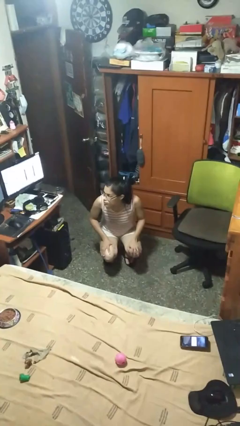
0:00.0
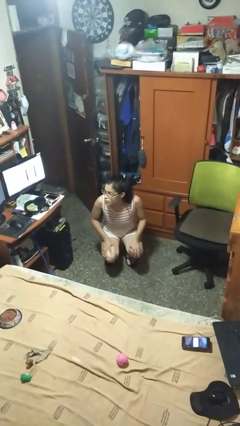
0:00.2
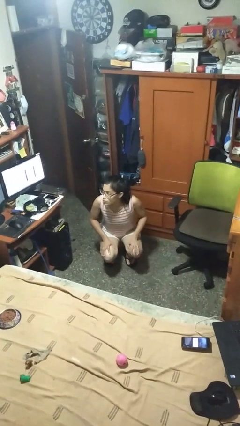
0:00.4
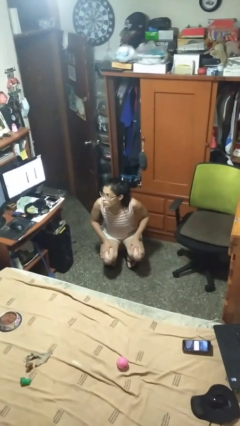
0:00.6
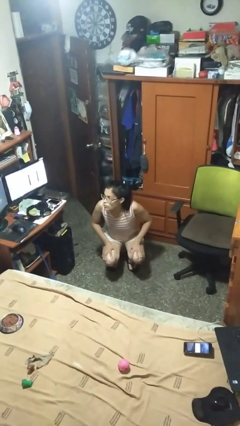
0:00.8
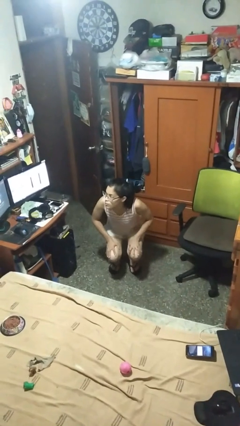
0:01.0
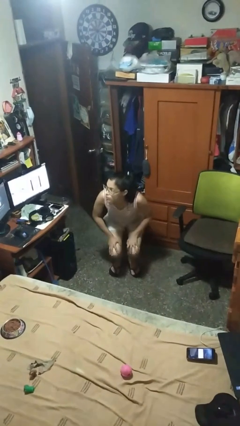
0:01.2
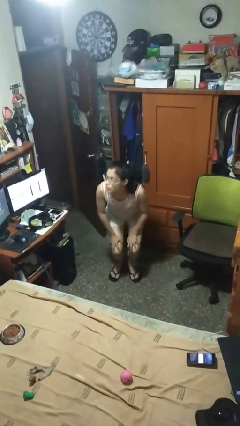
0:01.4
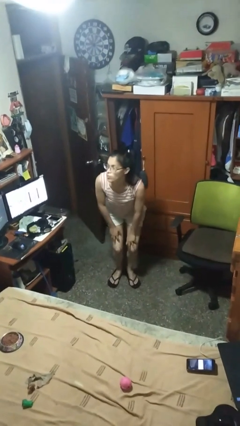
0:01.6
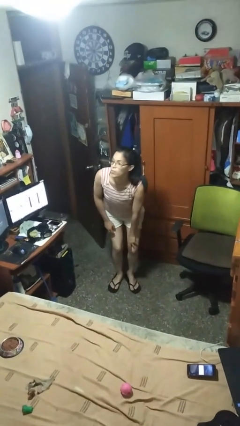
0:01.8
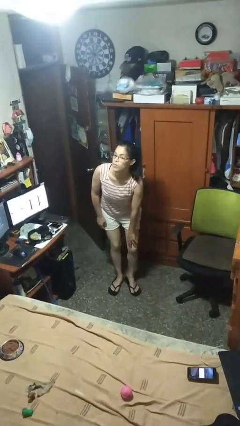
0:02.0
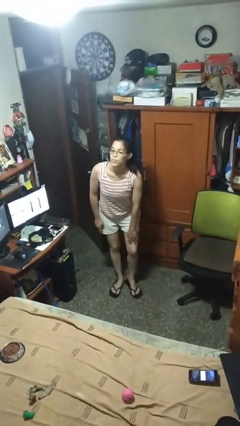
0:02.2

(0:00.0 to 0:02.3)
person stands up

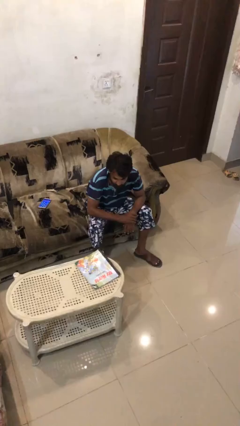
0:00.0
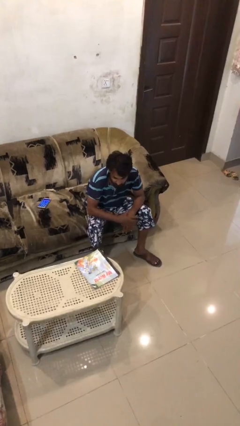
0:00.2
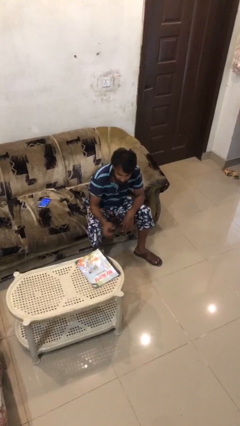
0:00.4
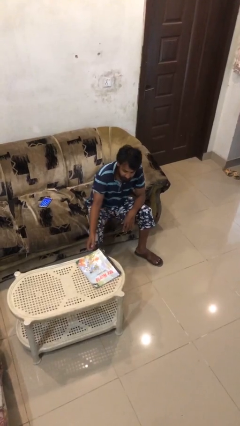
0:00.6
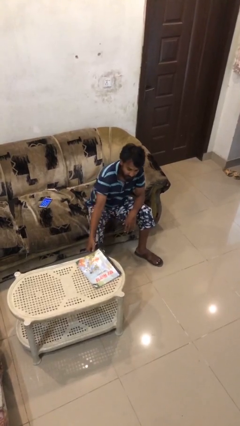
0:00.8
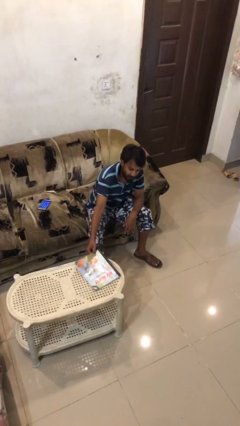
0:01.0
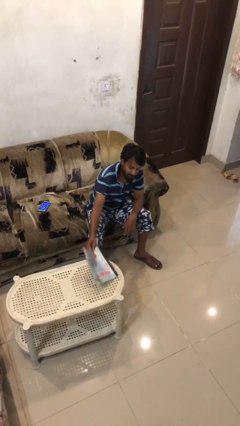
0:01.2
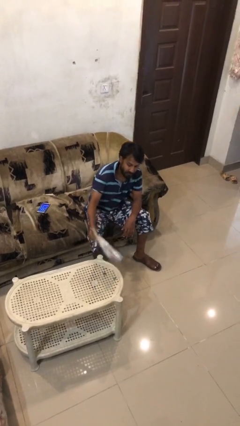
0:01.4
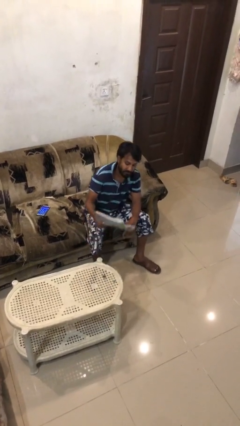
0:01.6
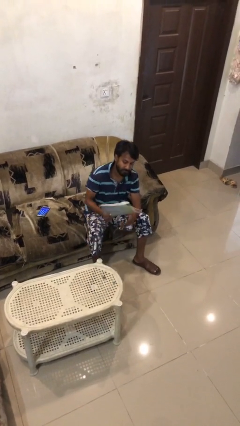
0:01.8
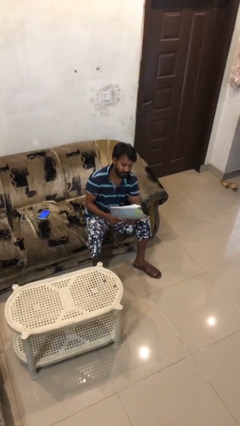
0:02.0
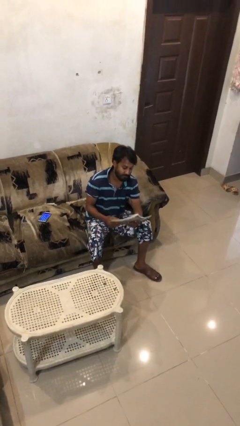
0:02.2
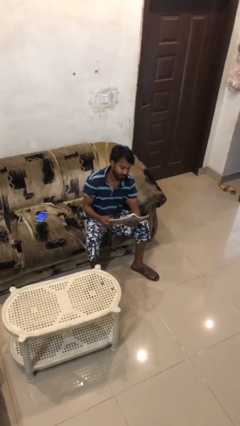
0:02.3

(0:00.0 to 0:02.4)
person picks up object from table

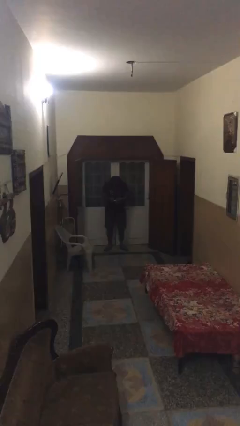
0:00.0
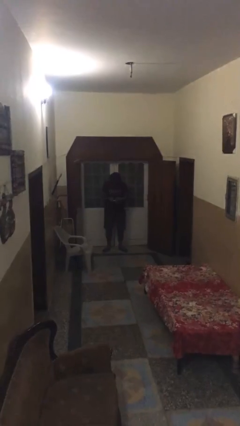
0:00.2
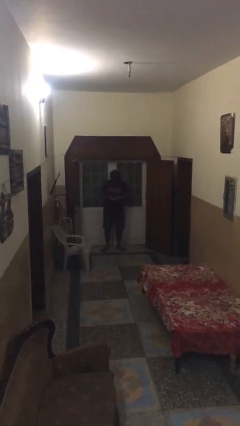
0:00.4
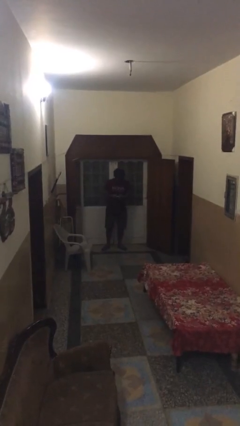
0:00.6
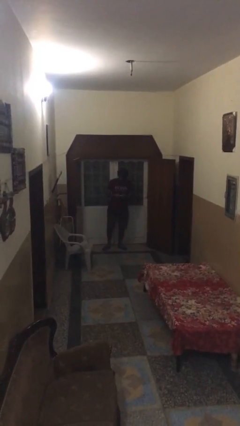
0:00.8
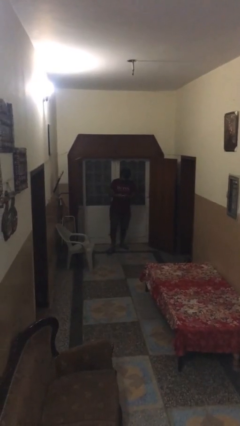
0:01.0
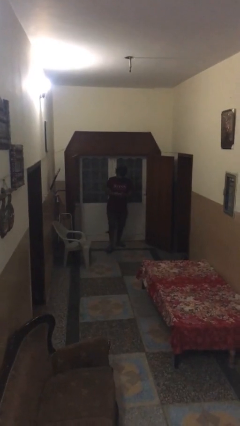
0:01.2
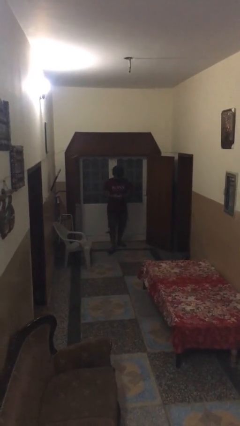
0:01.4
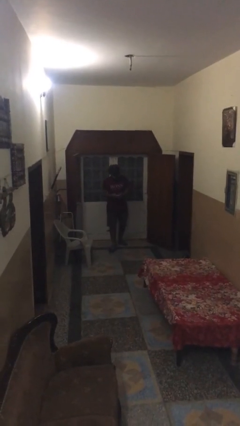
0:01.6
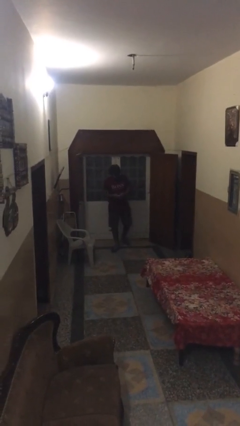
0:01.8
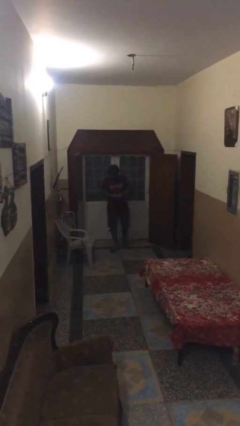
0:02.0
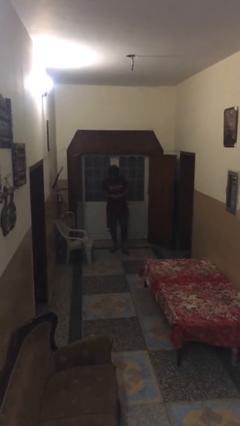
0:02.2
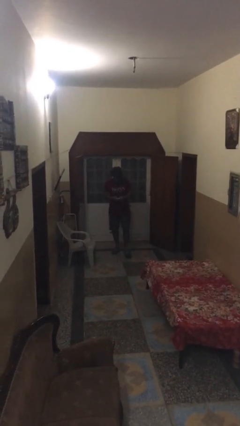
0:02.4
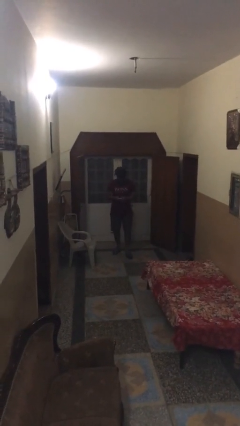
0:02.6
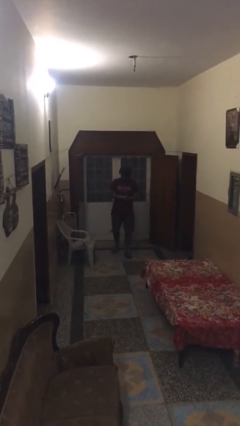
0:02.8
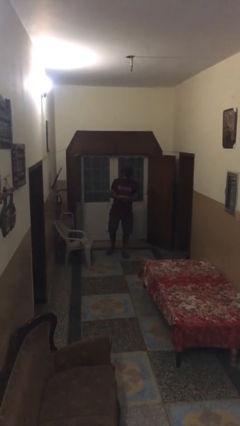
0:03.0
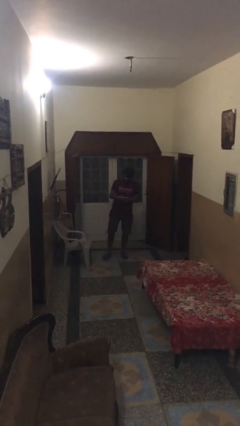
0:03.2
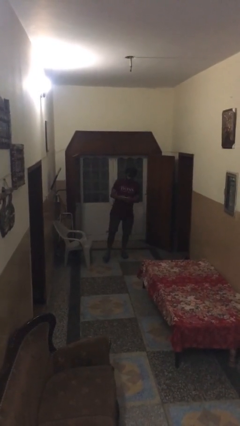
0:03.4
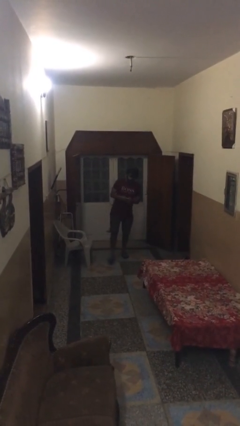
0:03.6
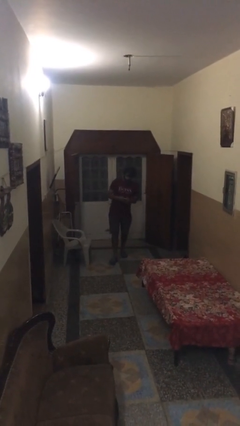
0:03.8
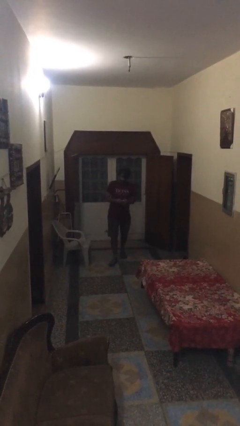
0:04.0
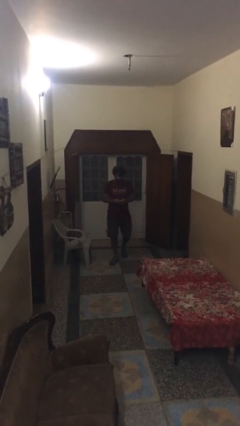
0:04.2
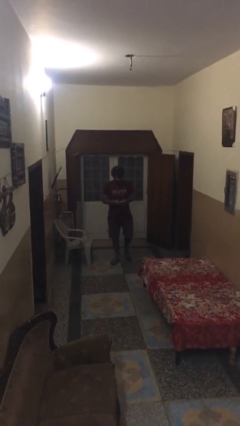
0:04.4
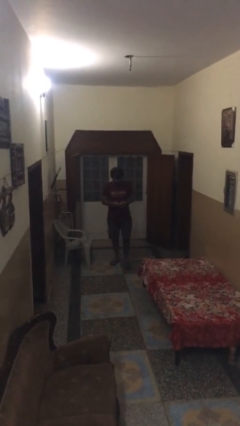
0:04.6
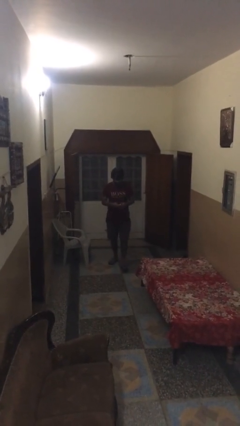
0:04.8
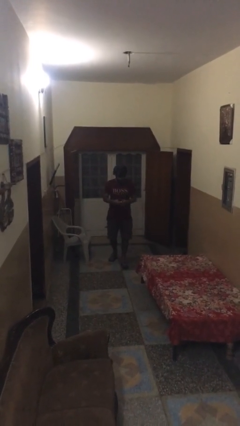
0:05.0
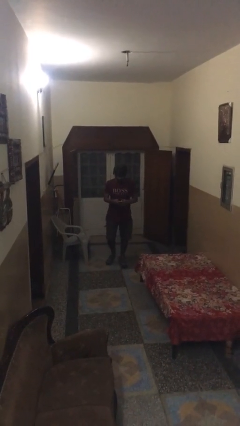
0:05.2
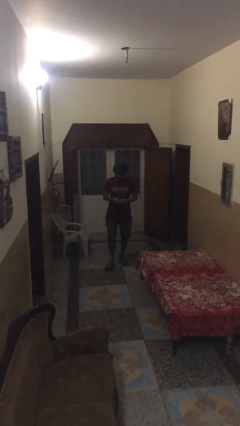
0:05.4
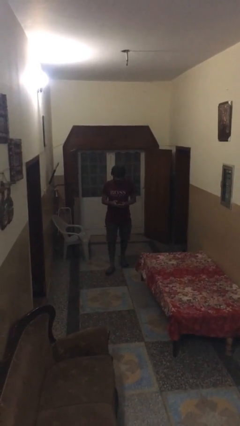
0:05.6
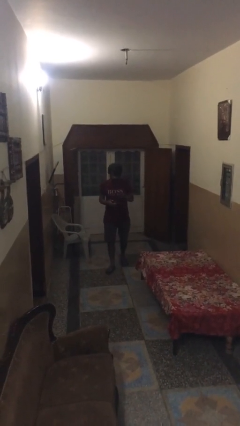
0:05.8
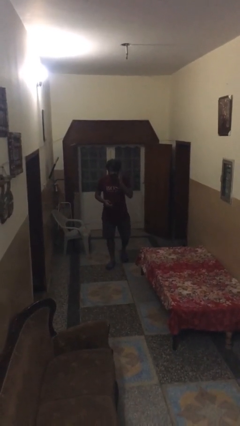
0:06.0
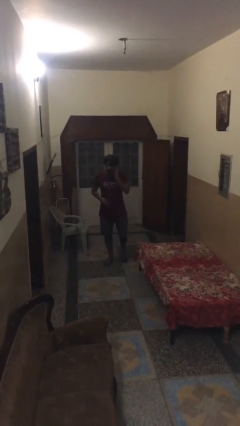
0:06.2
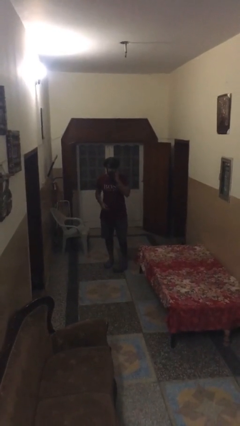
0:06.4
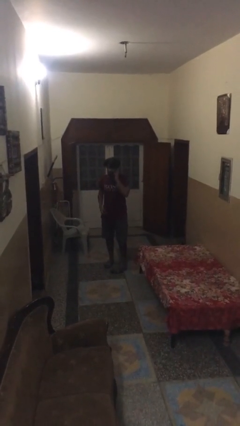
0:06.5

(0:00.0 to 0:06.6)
person texts on phone

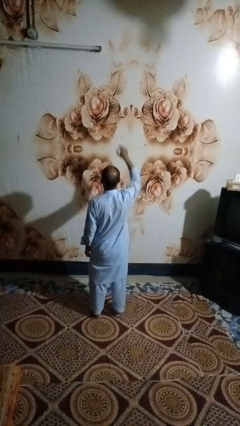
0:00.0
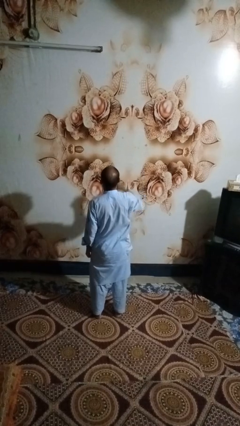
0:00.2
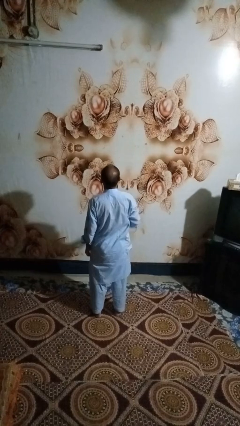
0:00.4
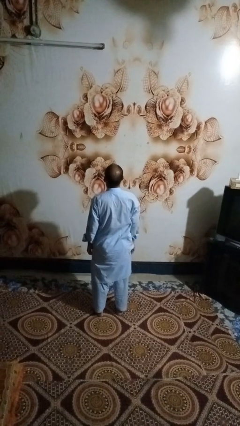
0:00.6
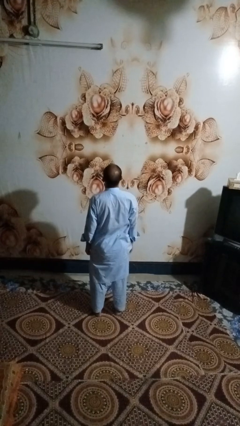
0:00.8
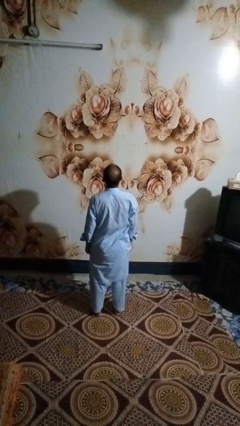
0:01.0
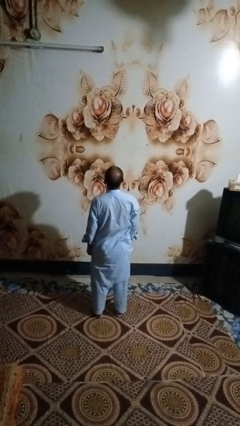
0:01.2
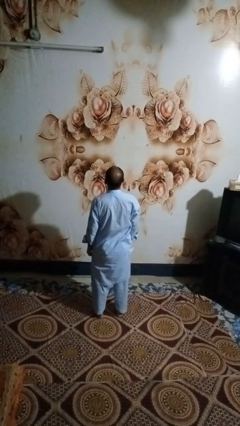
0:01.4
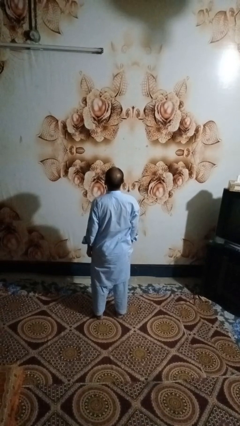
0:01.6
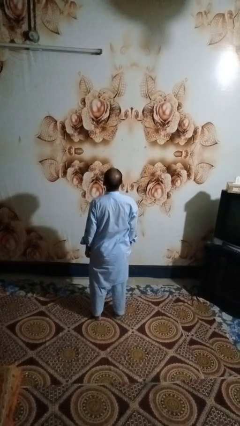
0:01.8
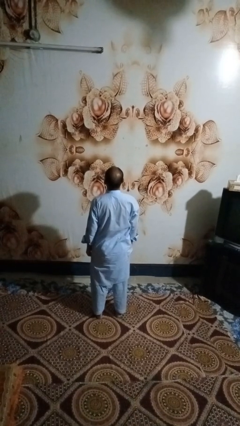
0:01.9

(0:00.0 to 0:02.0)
person gestures lower hand

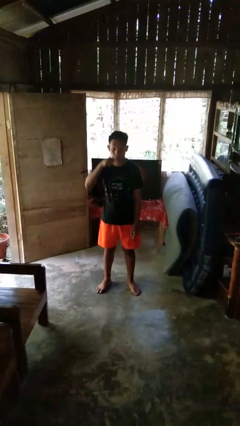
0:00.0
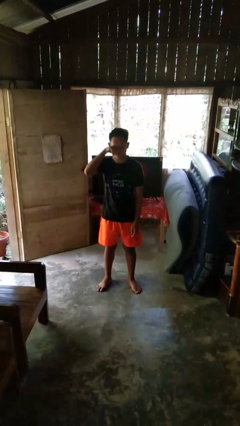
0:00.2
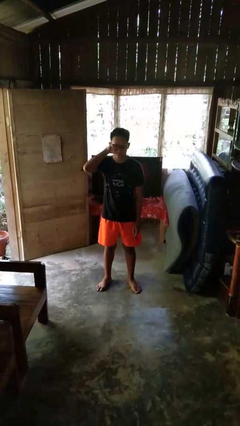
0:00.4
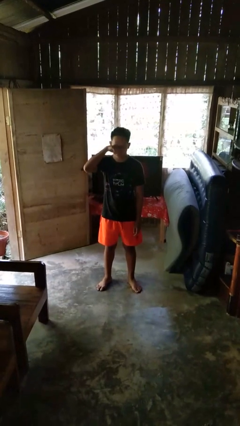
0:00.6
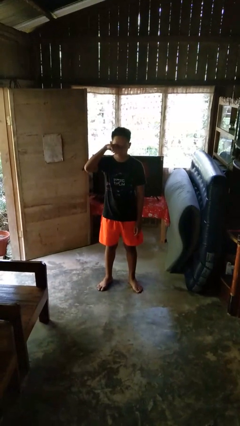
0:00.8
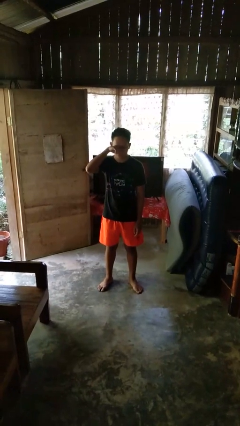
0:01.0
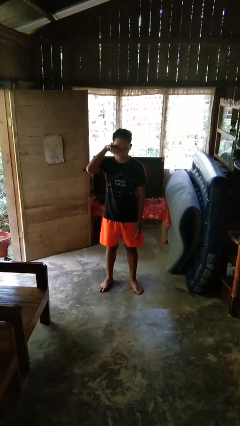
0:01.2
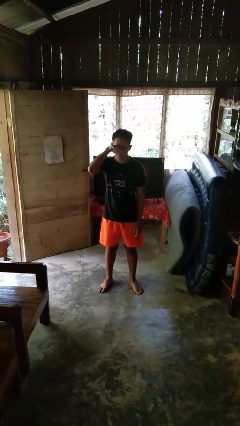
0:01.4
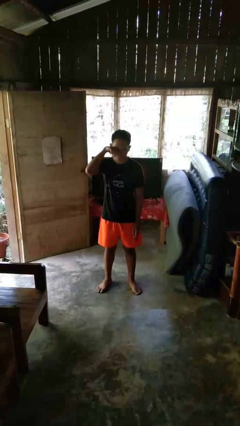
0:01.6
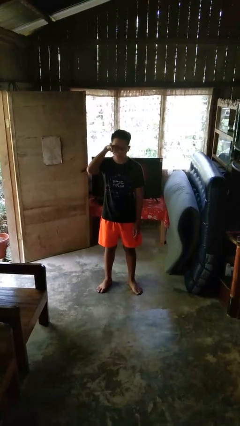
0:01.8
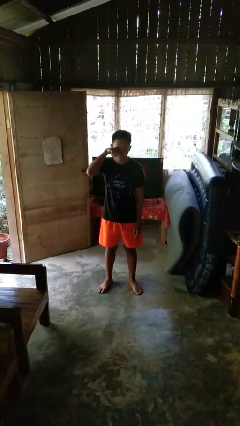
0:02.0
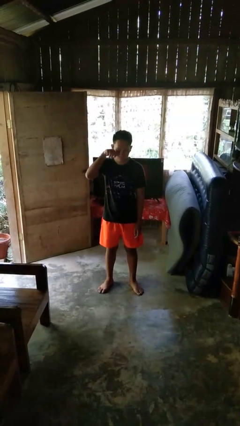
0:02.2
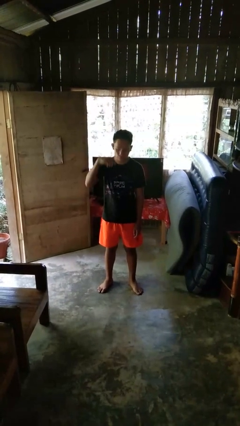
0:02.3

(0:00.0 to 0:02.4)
person rubs eyes

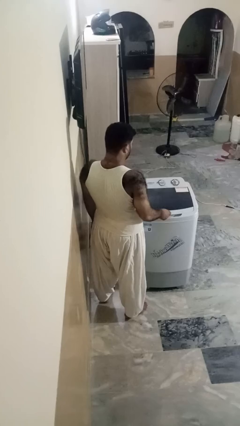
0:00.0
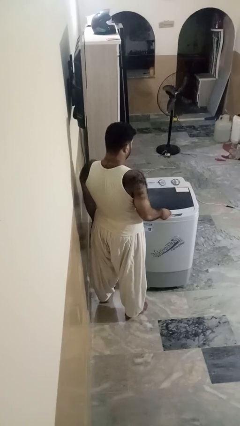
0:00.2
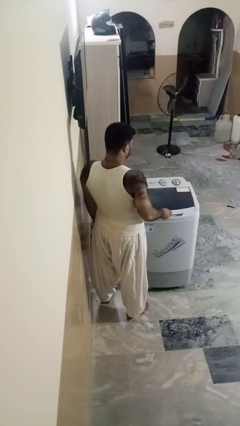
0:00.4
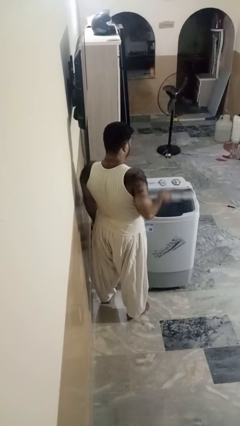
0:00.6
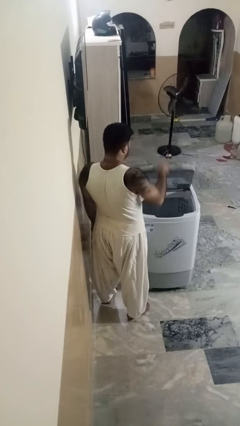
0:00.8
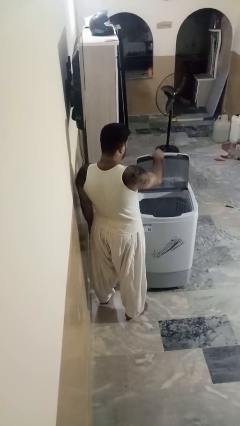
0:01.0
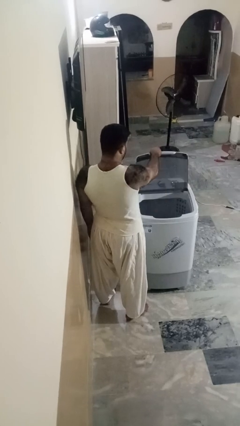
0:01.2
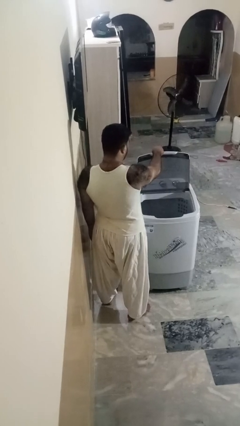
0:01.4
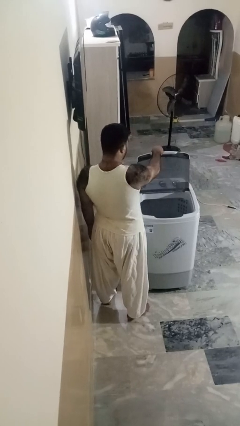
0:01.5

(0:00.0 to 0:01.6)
person opens clothes washer

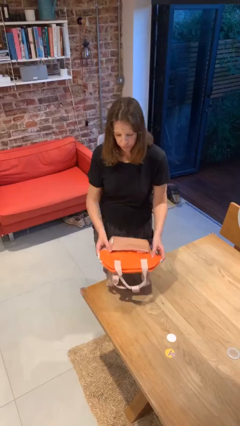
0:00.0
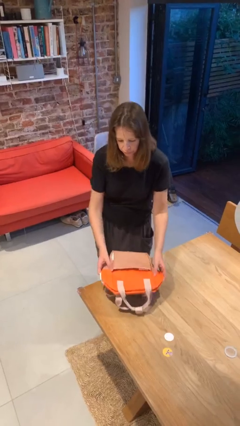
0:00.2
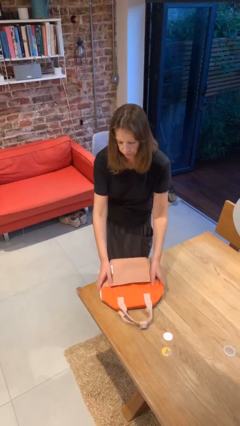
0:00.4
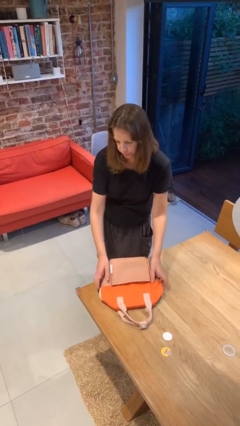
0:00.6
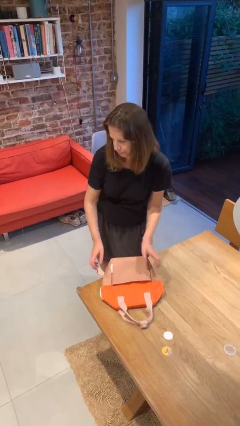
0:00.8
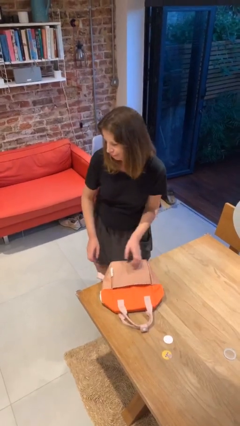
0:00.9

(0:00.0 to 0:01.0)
person puts down object on table
